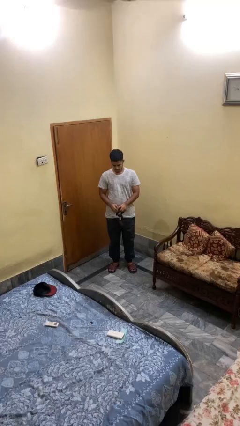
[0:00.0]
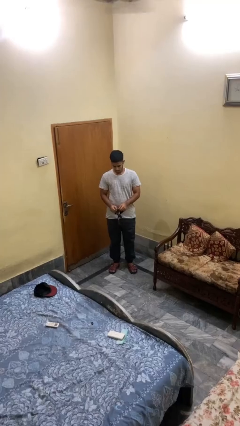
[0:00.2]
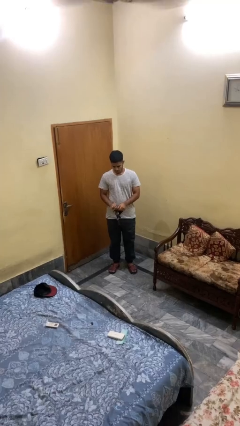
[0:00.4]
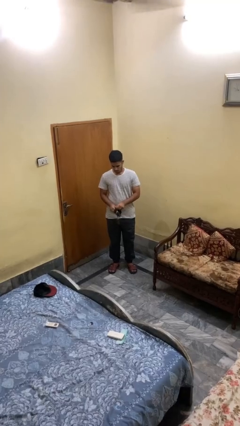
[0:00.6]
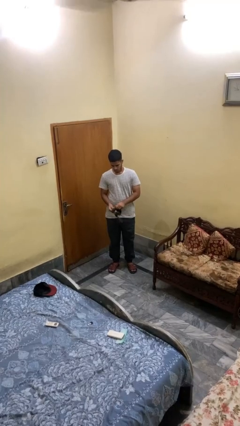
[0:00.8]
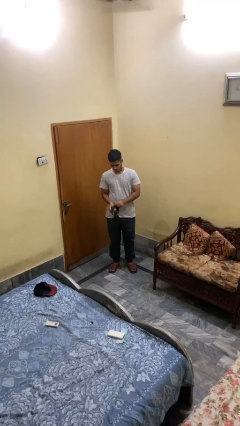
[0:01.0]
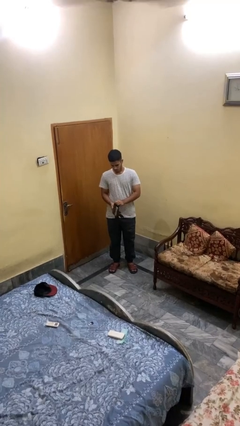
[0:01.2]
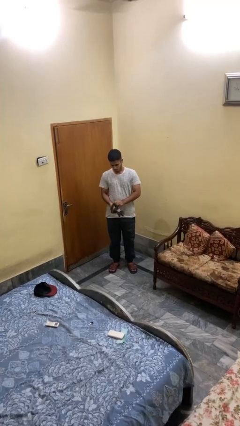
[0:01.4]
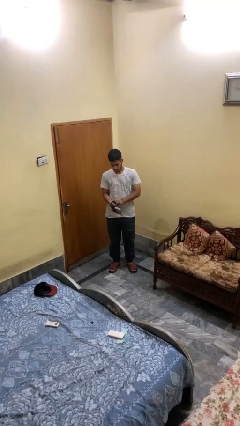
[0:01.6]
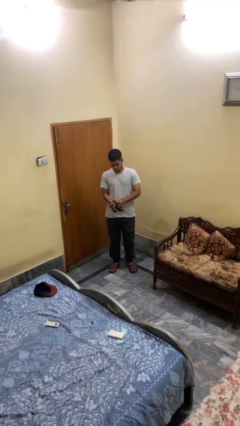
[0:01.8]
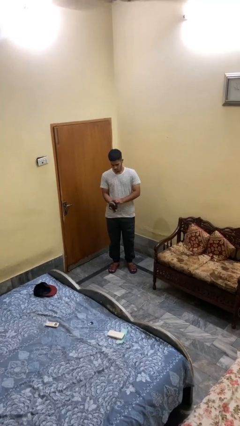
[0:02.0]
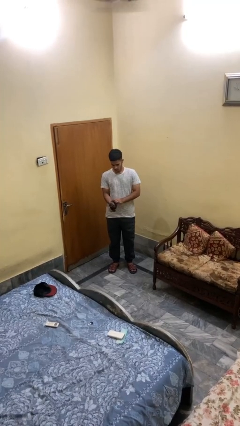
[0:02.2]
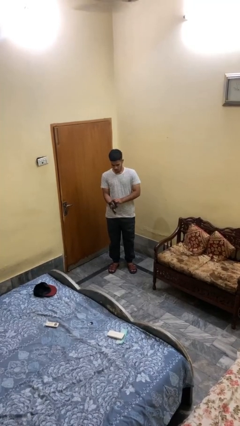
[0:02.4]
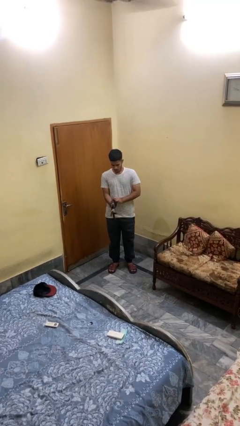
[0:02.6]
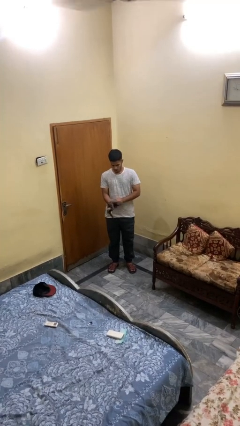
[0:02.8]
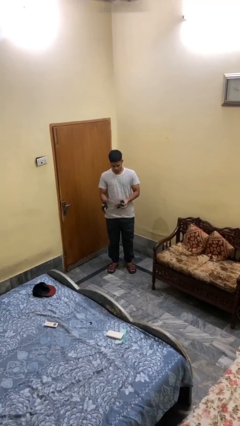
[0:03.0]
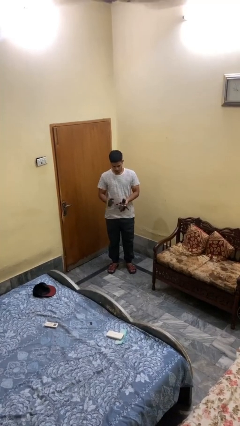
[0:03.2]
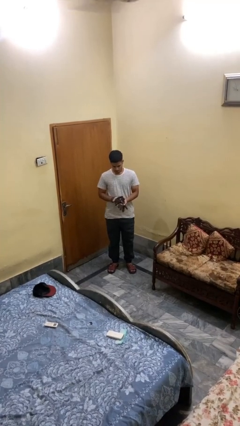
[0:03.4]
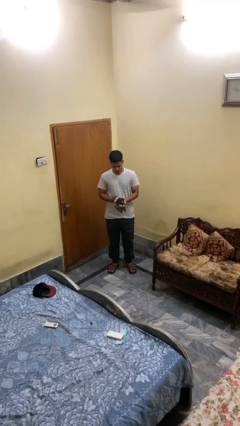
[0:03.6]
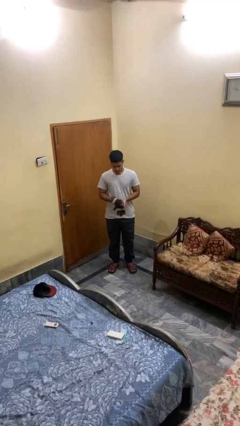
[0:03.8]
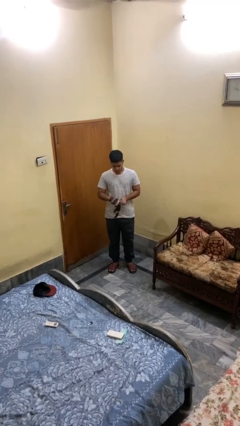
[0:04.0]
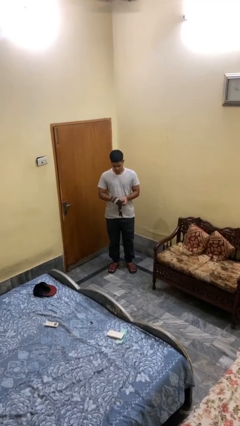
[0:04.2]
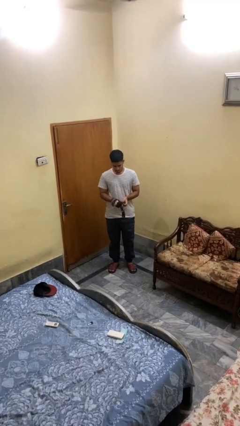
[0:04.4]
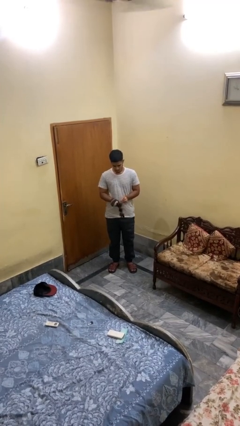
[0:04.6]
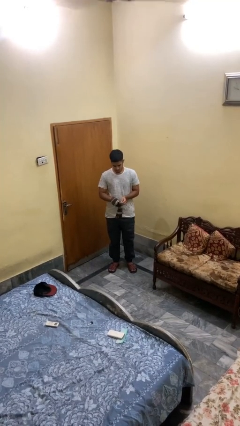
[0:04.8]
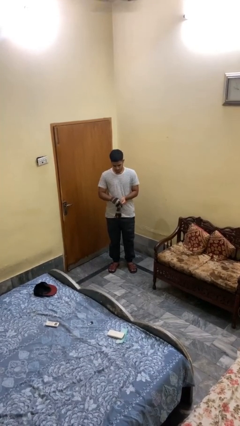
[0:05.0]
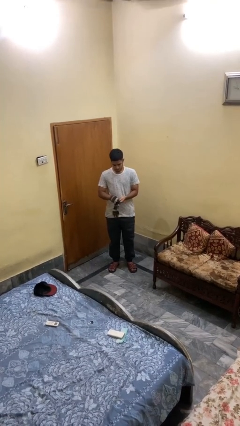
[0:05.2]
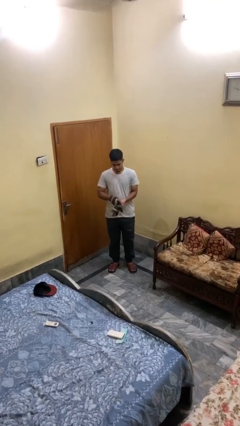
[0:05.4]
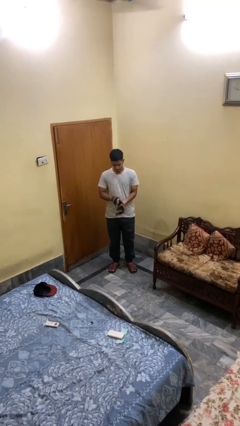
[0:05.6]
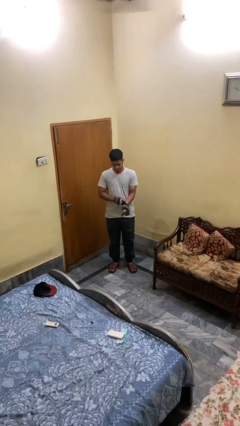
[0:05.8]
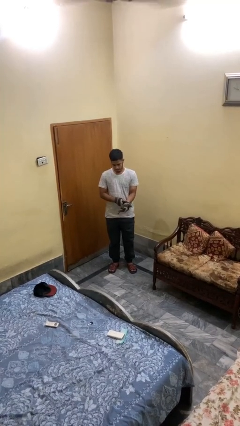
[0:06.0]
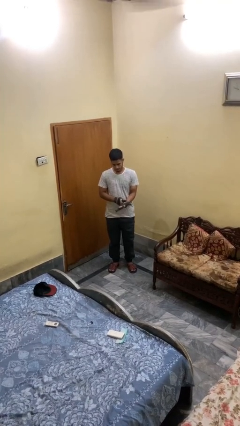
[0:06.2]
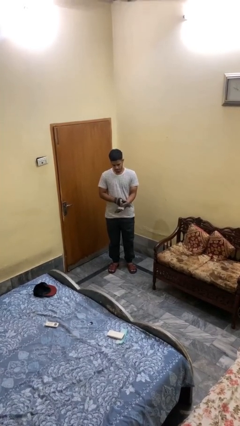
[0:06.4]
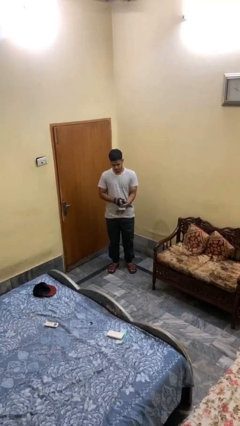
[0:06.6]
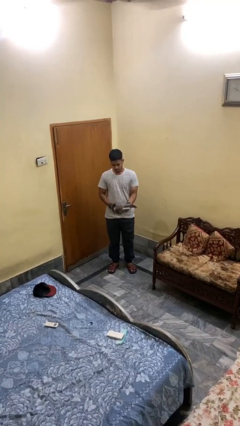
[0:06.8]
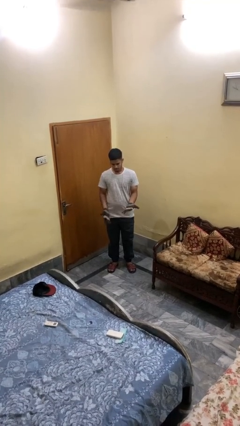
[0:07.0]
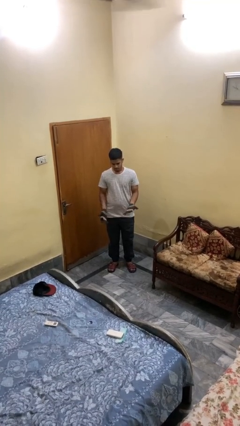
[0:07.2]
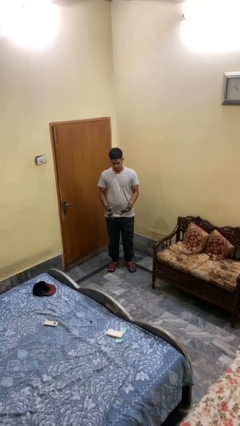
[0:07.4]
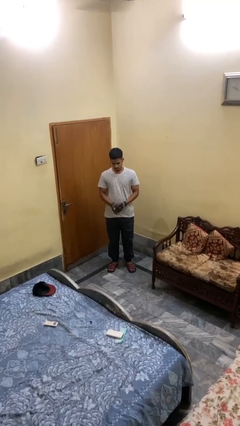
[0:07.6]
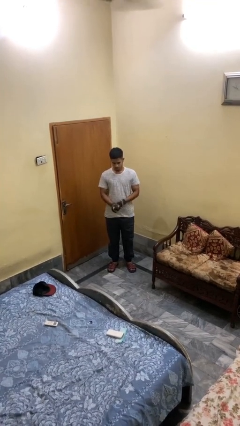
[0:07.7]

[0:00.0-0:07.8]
person puts on gloves

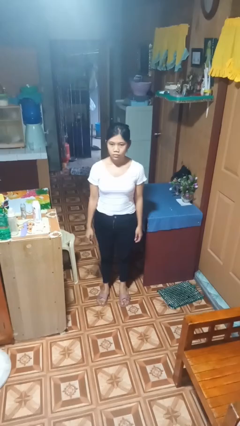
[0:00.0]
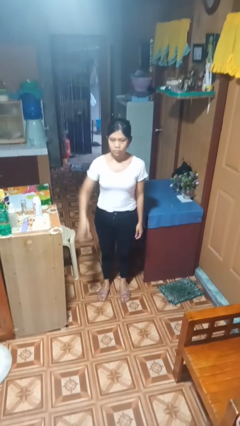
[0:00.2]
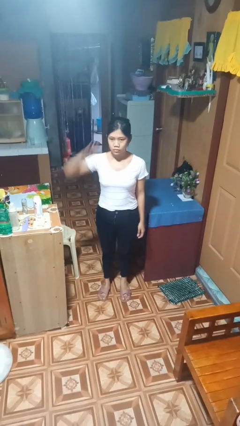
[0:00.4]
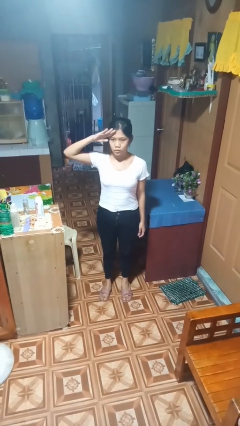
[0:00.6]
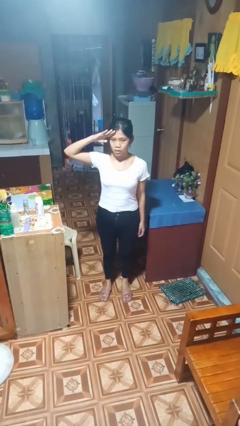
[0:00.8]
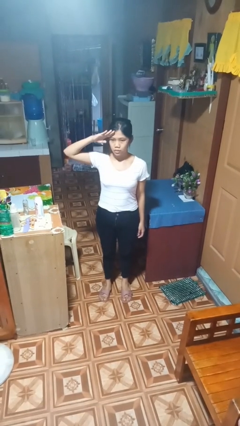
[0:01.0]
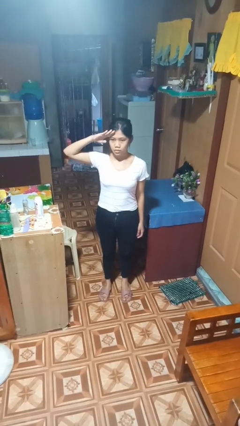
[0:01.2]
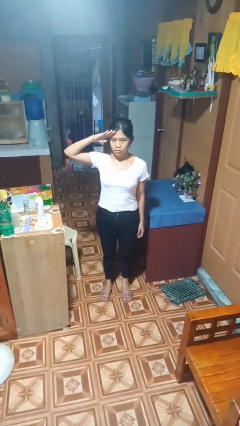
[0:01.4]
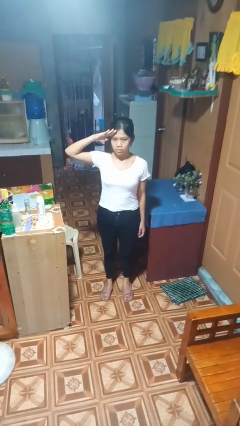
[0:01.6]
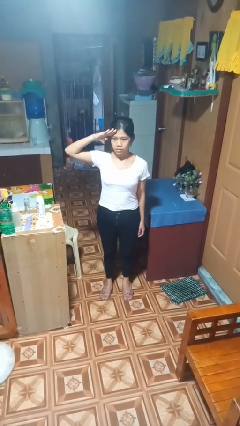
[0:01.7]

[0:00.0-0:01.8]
person salutes

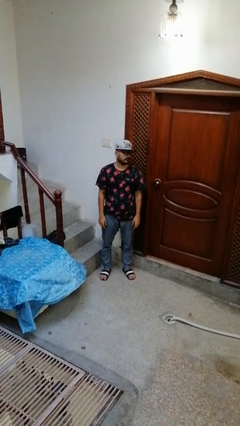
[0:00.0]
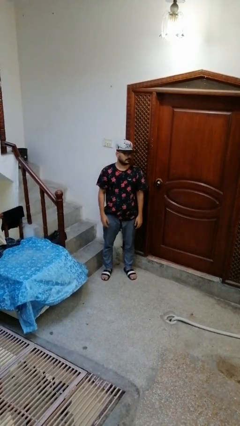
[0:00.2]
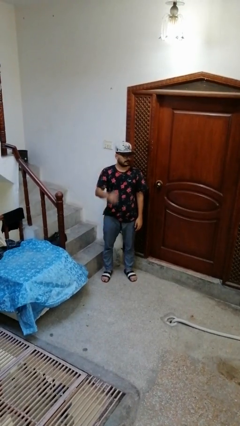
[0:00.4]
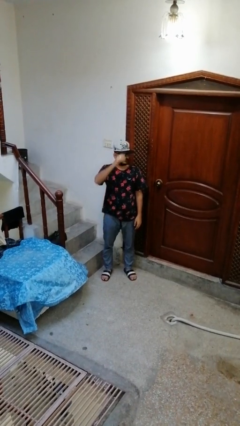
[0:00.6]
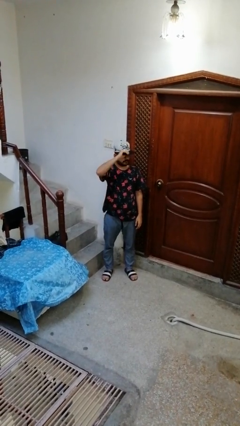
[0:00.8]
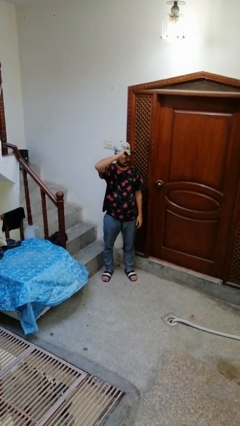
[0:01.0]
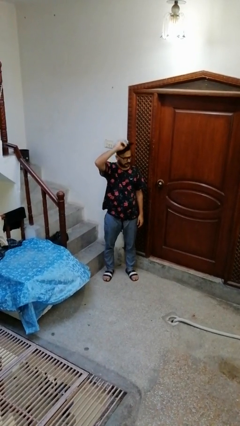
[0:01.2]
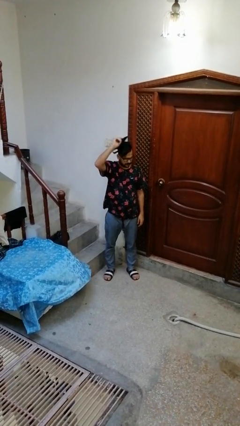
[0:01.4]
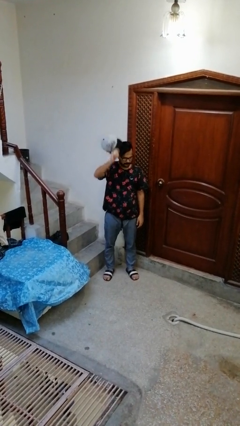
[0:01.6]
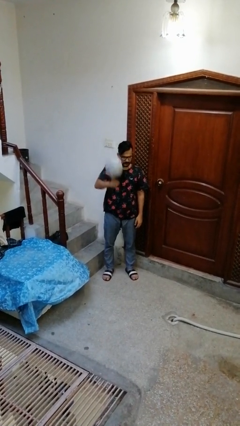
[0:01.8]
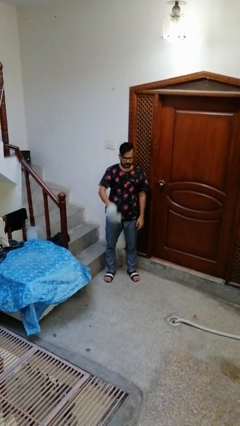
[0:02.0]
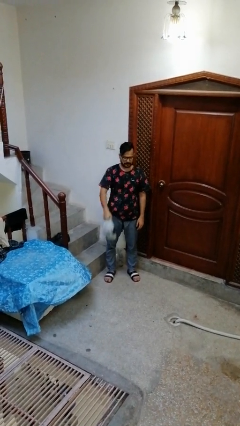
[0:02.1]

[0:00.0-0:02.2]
person takes off hat

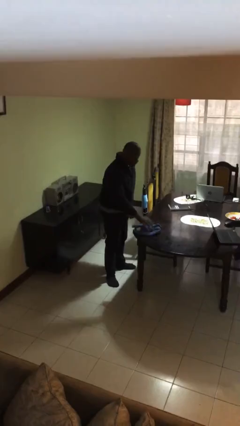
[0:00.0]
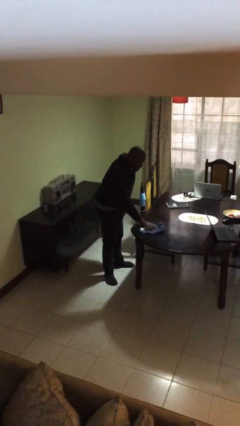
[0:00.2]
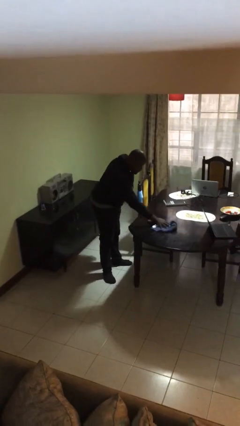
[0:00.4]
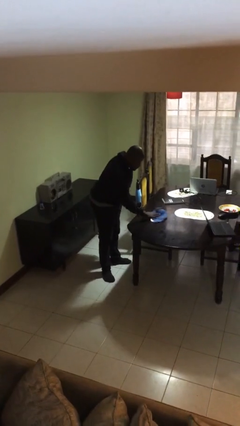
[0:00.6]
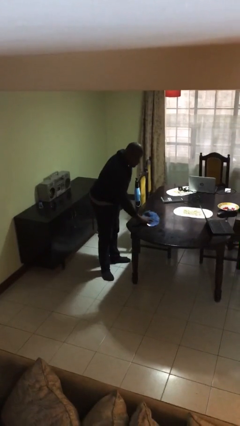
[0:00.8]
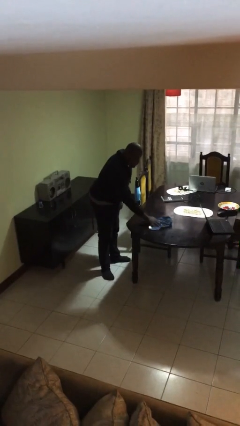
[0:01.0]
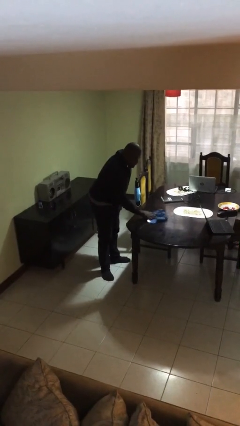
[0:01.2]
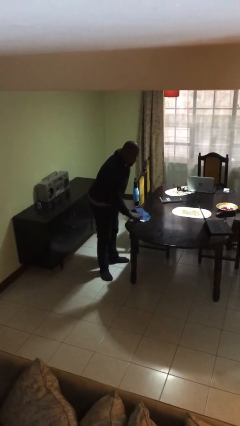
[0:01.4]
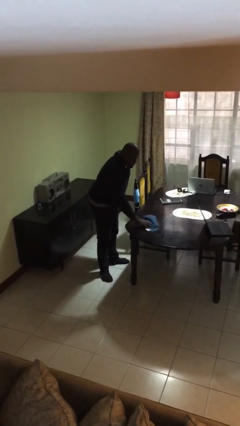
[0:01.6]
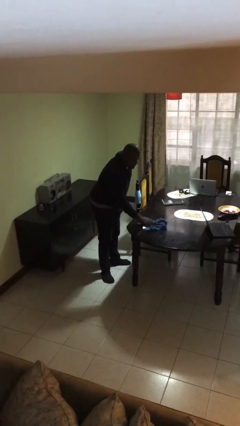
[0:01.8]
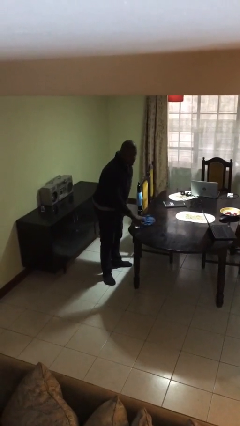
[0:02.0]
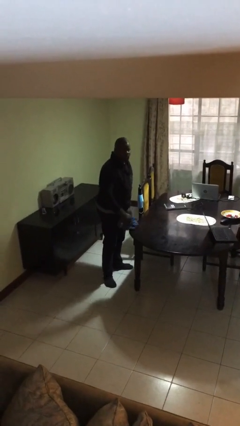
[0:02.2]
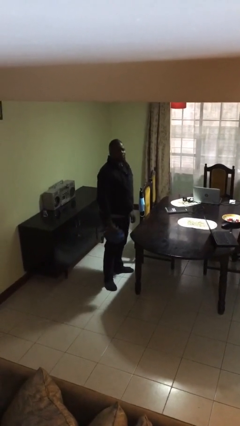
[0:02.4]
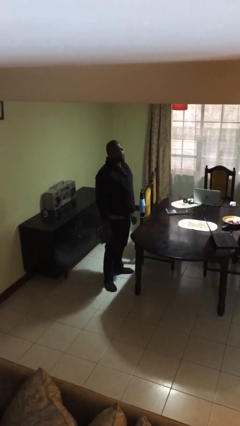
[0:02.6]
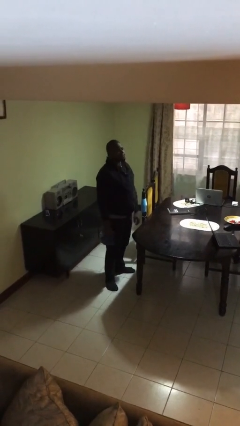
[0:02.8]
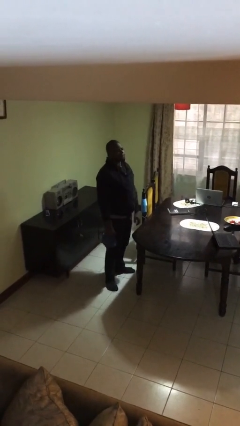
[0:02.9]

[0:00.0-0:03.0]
person cleans table with rag

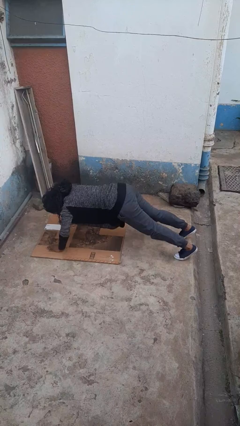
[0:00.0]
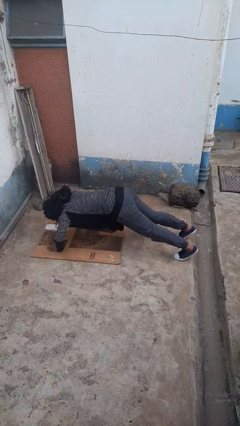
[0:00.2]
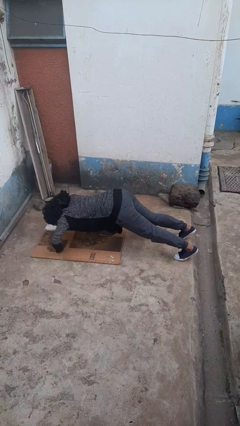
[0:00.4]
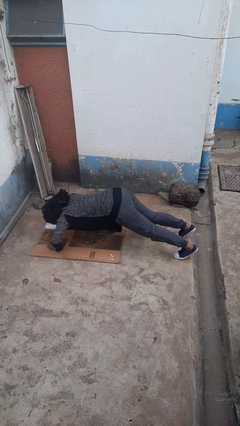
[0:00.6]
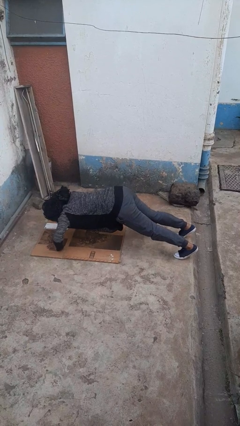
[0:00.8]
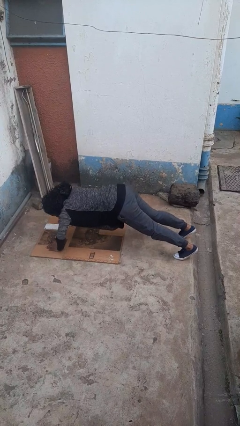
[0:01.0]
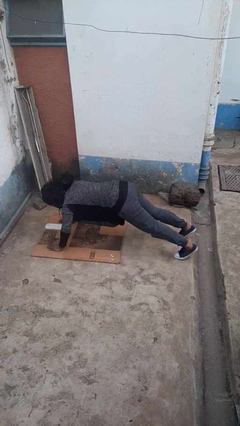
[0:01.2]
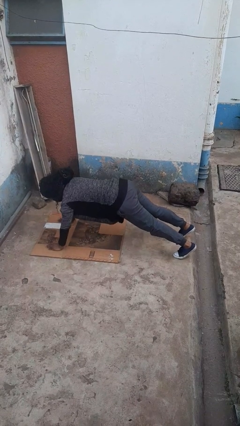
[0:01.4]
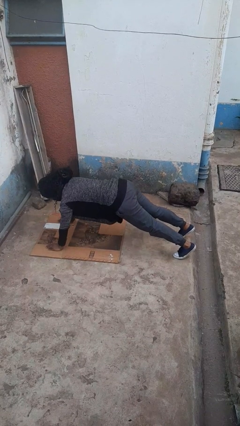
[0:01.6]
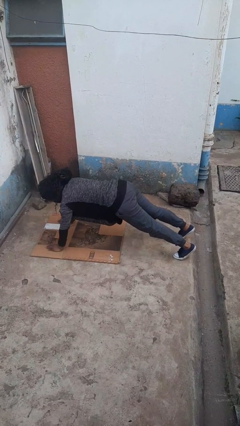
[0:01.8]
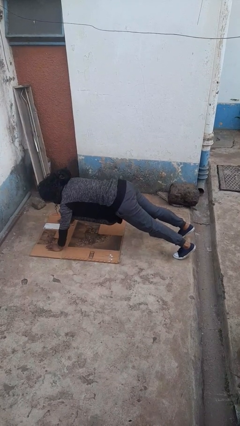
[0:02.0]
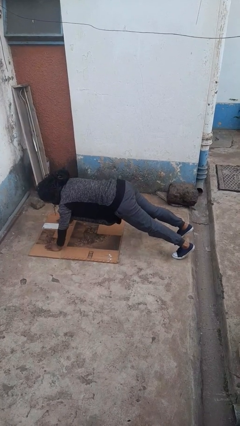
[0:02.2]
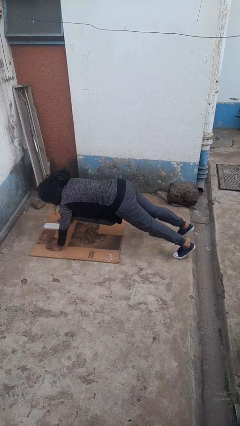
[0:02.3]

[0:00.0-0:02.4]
person exercises with pushup

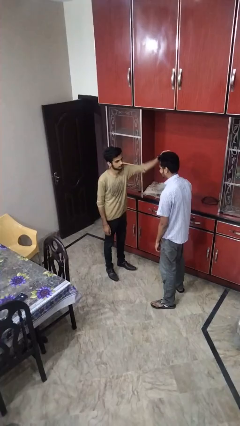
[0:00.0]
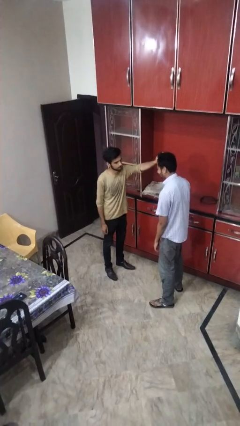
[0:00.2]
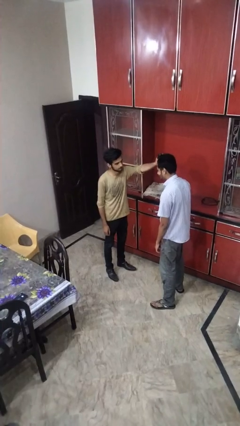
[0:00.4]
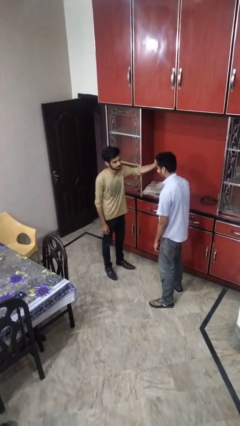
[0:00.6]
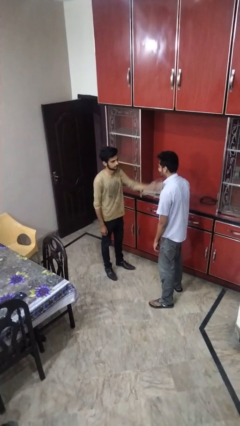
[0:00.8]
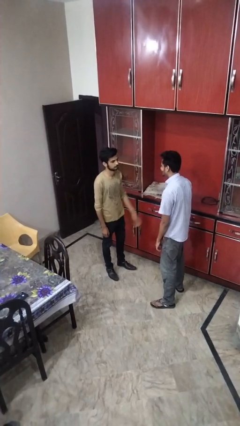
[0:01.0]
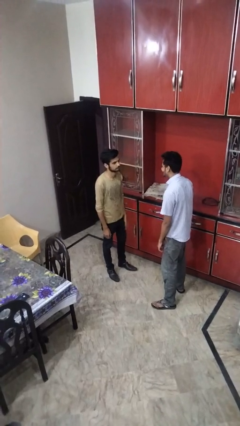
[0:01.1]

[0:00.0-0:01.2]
person grabs person by hair
